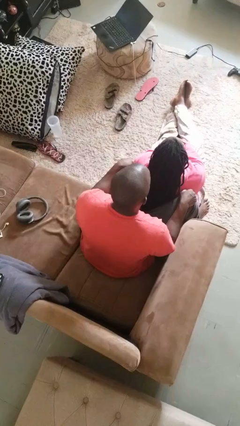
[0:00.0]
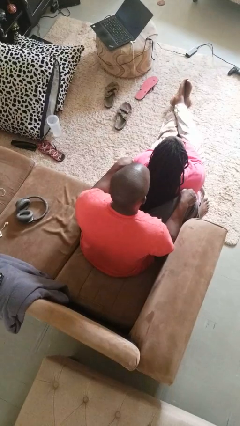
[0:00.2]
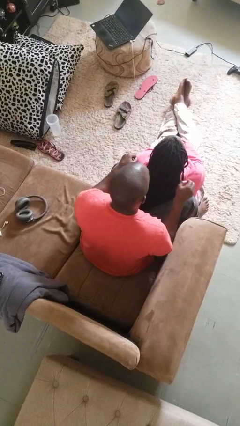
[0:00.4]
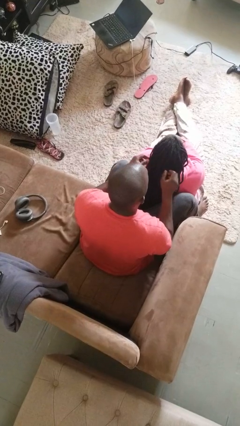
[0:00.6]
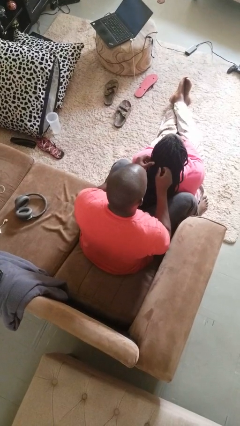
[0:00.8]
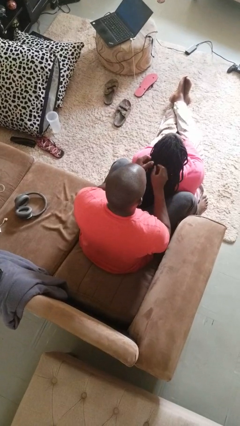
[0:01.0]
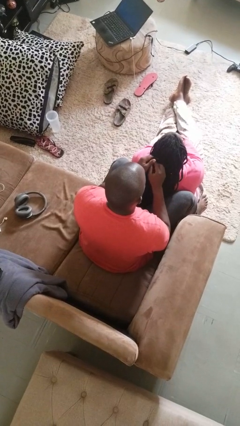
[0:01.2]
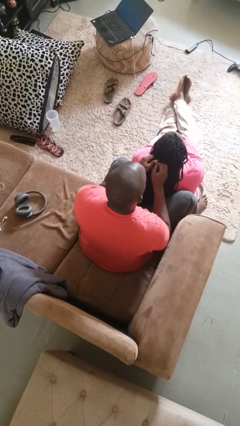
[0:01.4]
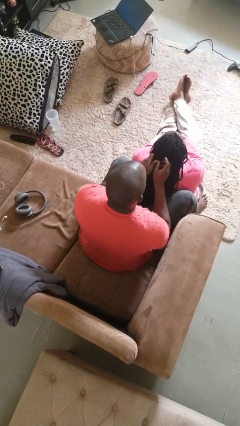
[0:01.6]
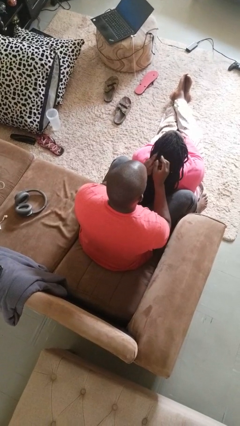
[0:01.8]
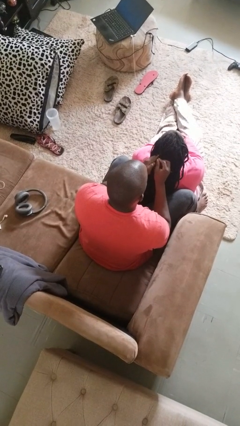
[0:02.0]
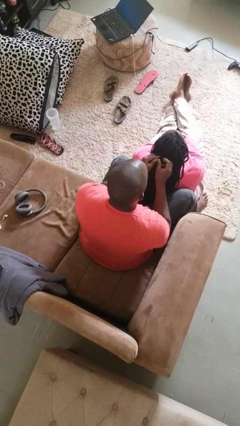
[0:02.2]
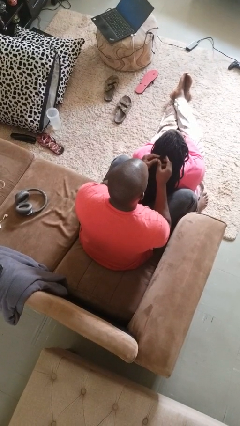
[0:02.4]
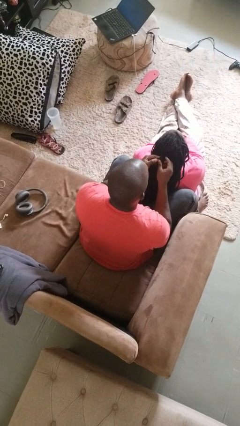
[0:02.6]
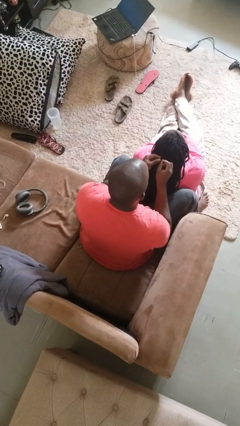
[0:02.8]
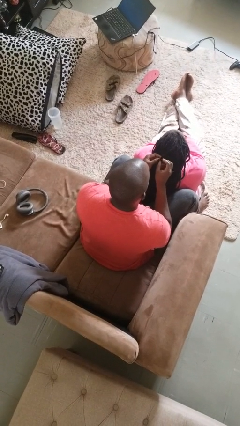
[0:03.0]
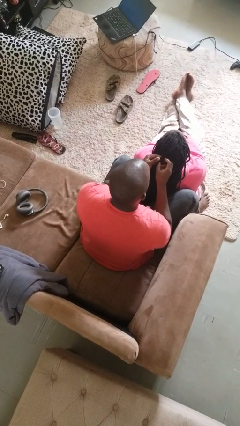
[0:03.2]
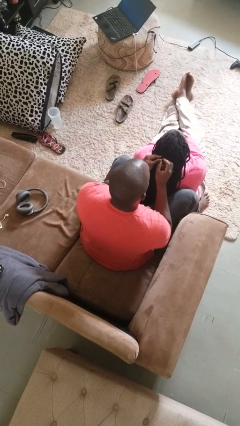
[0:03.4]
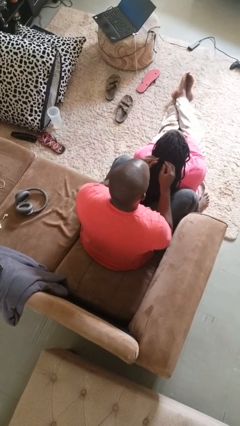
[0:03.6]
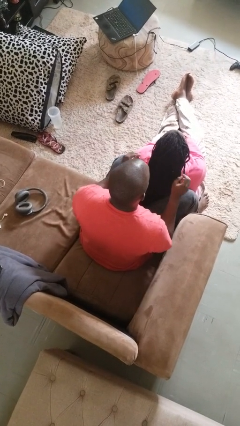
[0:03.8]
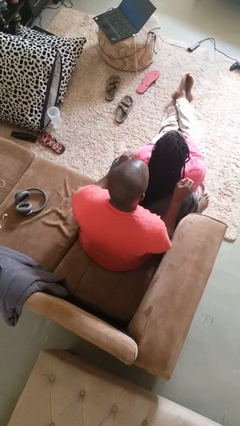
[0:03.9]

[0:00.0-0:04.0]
person braids hair of person

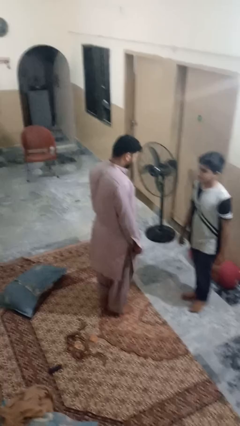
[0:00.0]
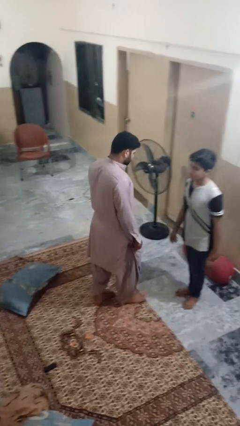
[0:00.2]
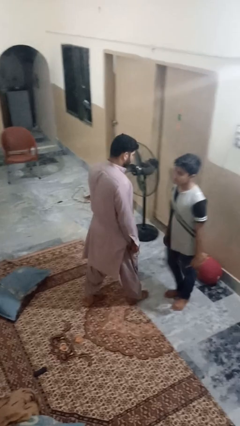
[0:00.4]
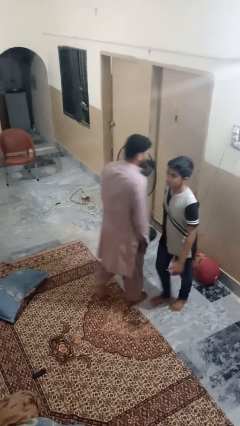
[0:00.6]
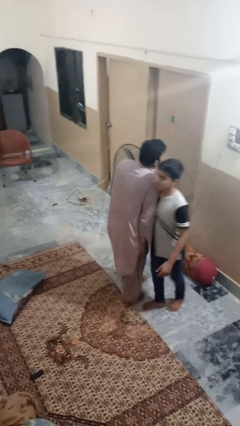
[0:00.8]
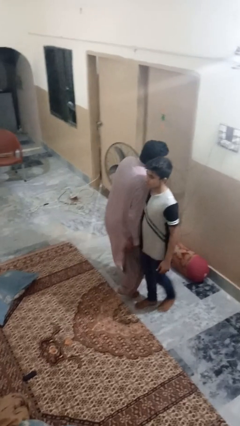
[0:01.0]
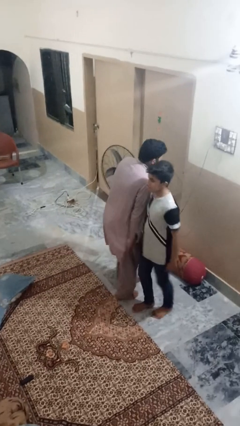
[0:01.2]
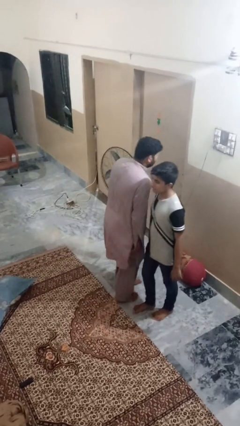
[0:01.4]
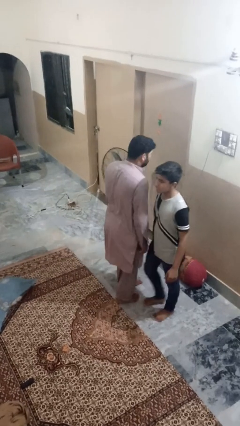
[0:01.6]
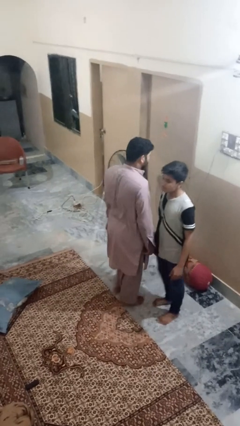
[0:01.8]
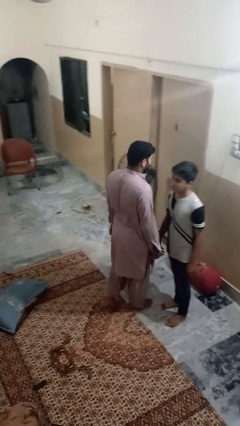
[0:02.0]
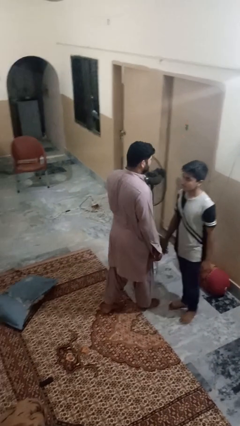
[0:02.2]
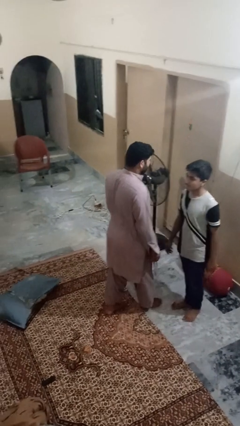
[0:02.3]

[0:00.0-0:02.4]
person bumps into person

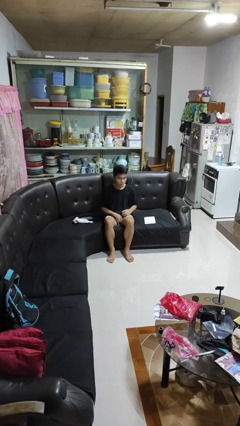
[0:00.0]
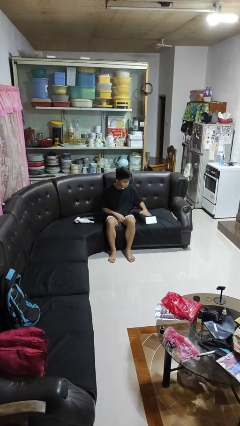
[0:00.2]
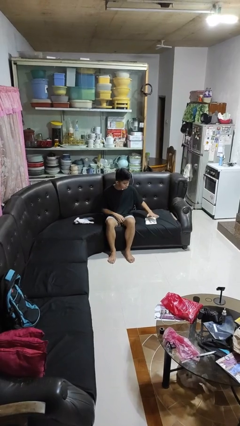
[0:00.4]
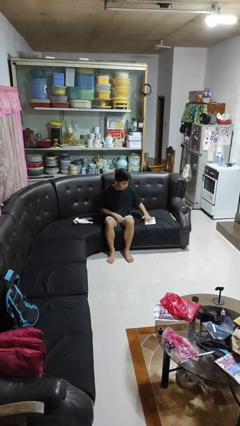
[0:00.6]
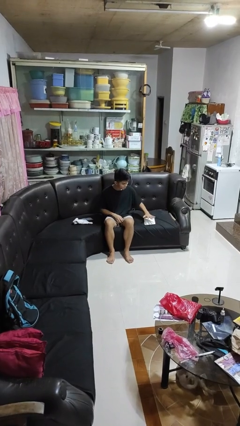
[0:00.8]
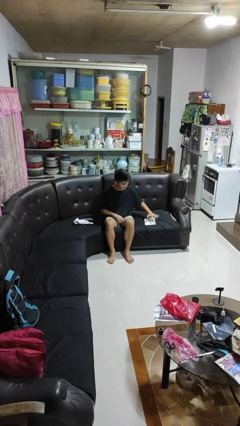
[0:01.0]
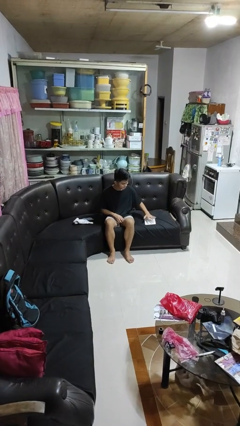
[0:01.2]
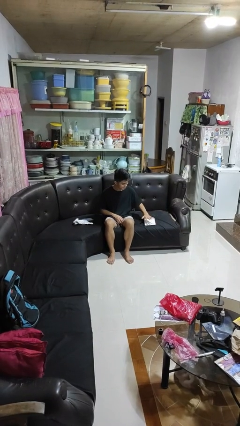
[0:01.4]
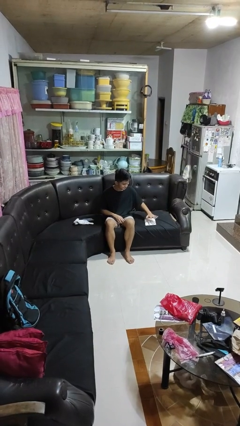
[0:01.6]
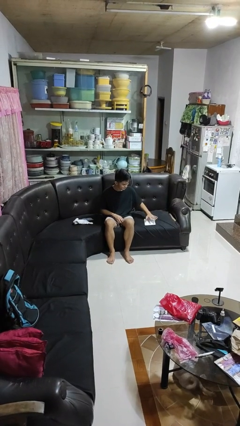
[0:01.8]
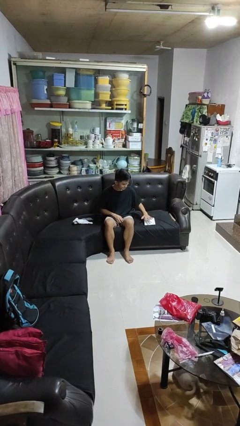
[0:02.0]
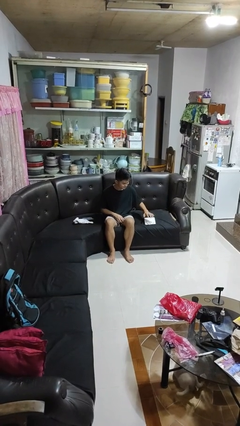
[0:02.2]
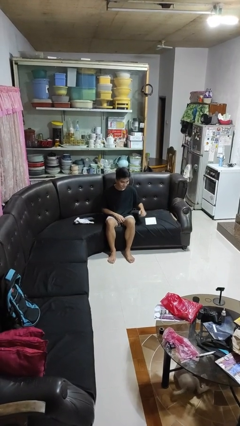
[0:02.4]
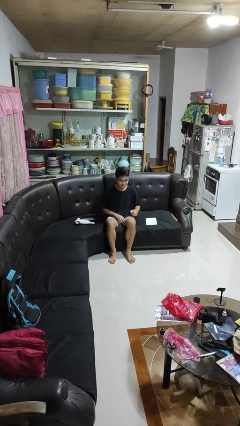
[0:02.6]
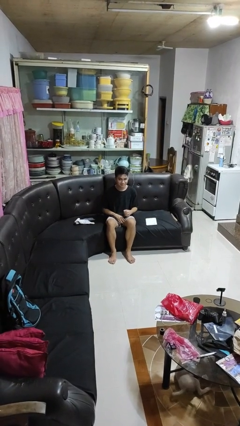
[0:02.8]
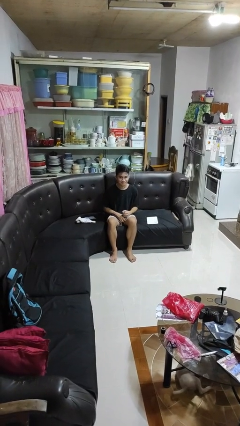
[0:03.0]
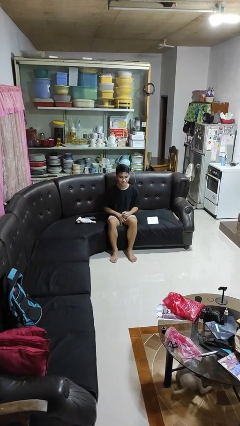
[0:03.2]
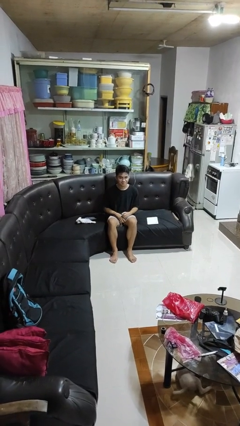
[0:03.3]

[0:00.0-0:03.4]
person waves hand over object

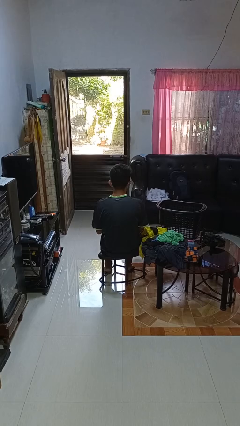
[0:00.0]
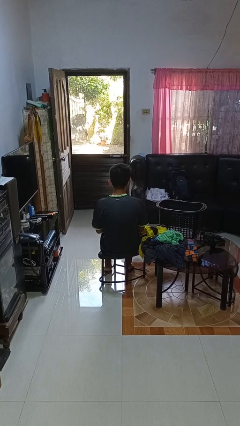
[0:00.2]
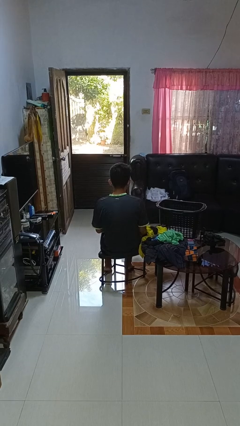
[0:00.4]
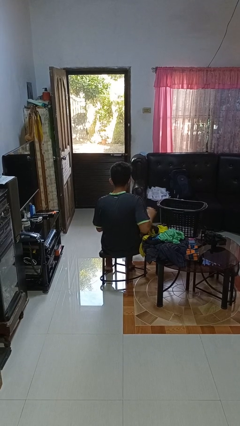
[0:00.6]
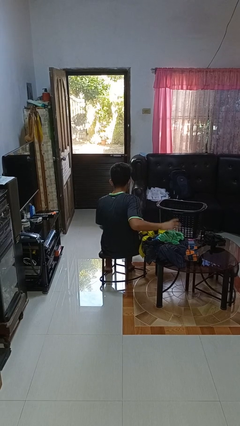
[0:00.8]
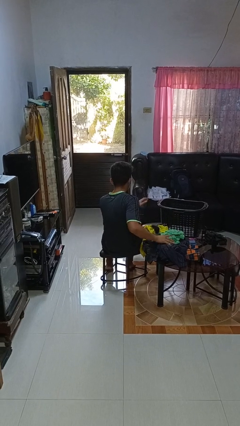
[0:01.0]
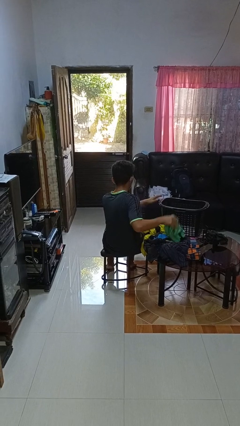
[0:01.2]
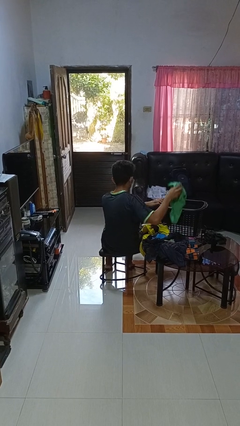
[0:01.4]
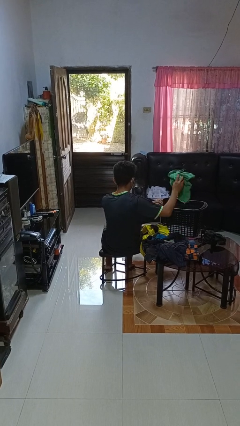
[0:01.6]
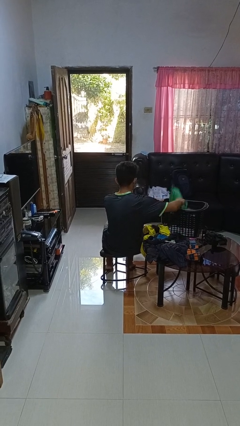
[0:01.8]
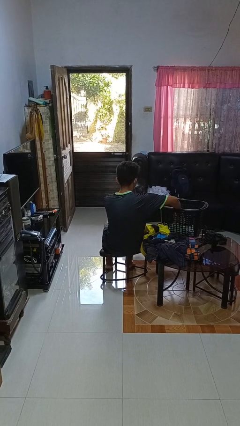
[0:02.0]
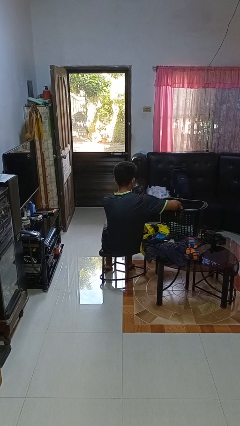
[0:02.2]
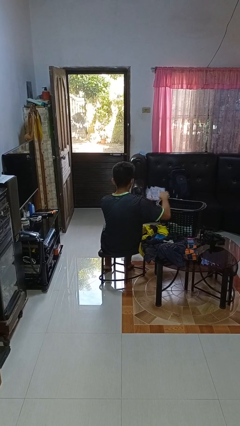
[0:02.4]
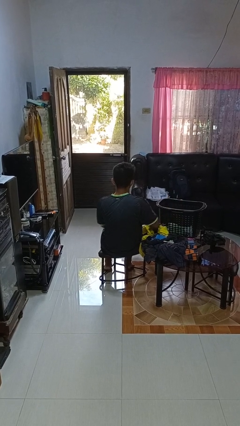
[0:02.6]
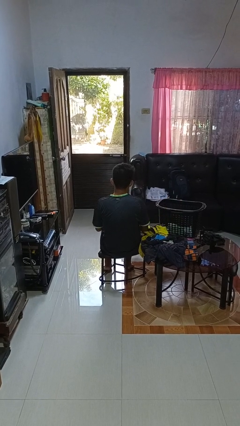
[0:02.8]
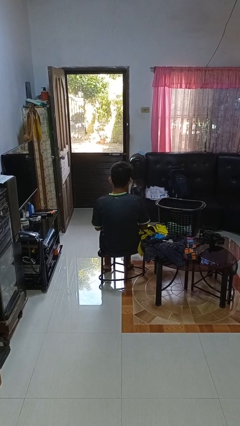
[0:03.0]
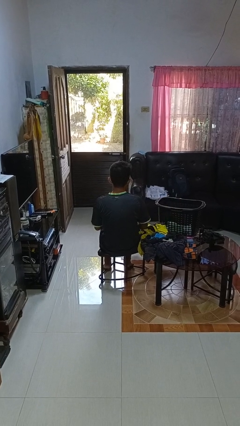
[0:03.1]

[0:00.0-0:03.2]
person puts object into basket

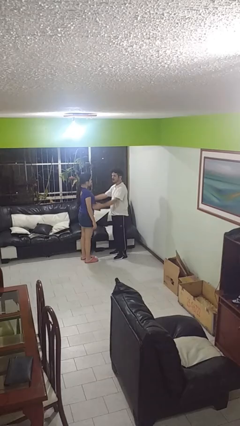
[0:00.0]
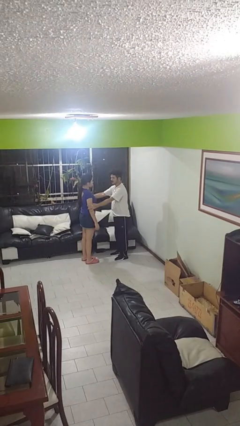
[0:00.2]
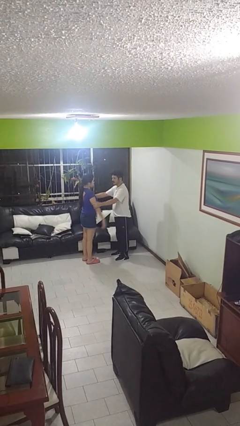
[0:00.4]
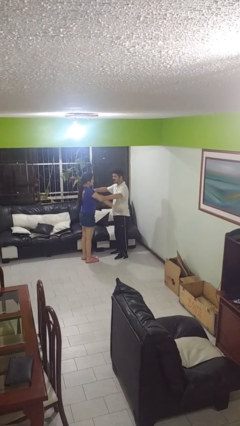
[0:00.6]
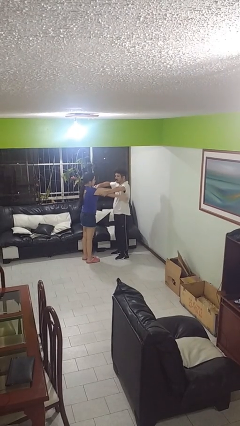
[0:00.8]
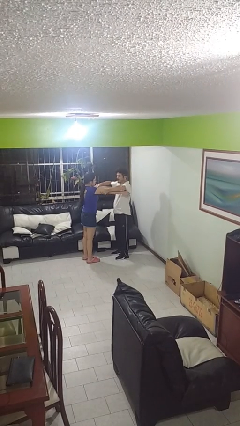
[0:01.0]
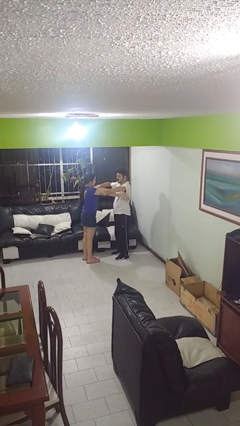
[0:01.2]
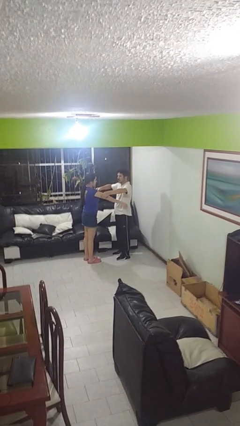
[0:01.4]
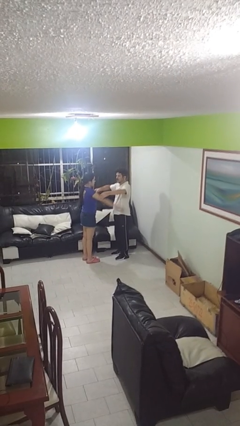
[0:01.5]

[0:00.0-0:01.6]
person grabs person by bicep

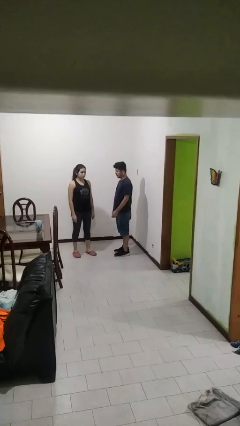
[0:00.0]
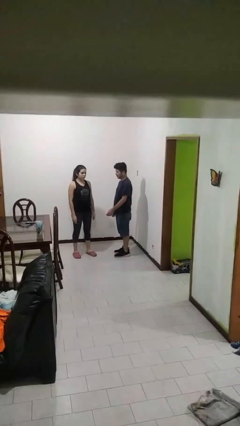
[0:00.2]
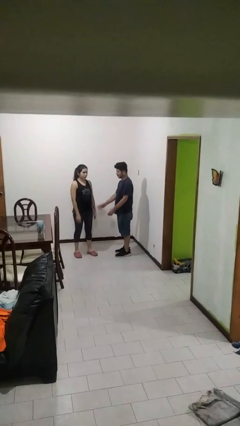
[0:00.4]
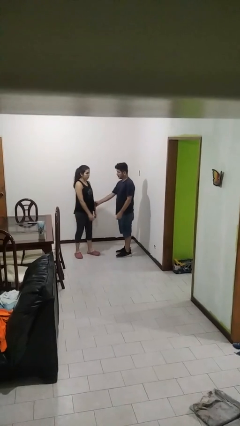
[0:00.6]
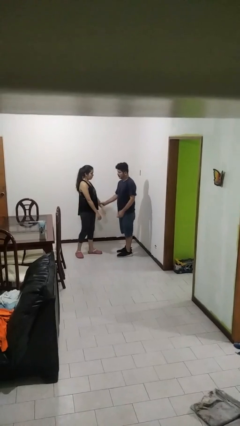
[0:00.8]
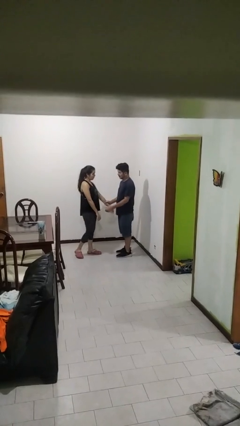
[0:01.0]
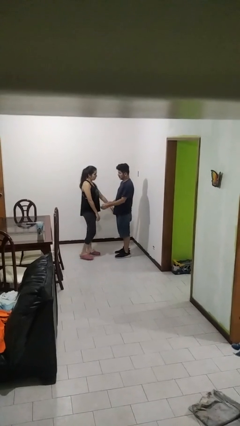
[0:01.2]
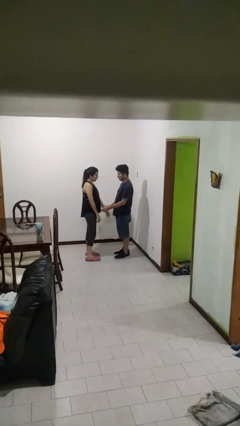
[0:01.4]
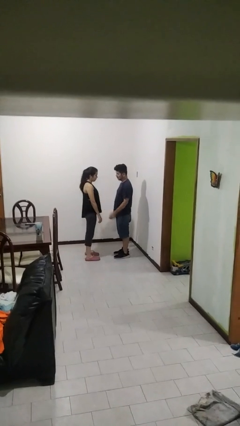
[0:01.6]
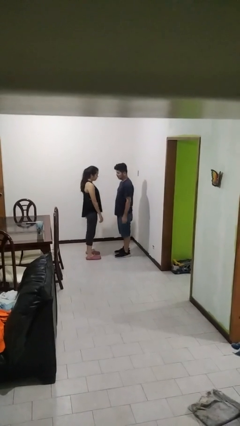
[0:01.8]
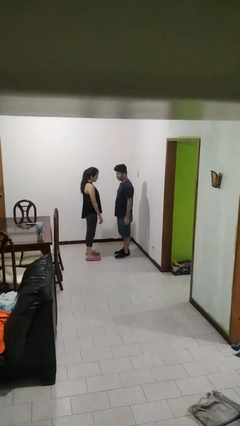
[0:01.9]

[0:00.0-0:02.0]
person grabs person by forearm

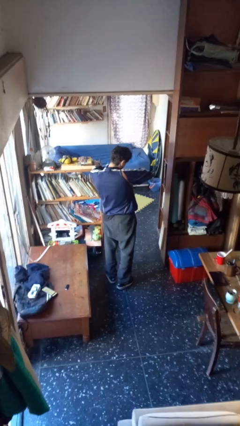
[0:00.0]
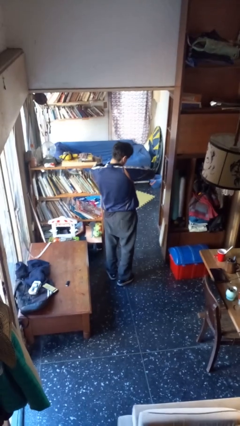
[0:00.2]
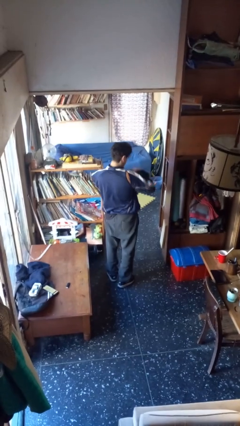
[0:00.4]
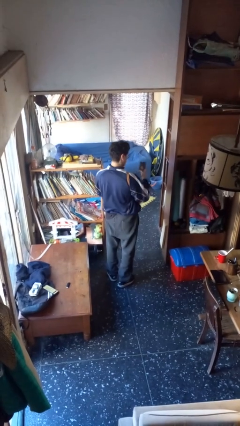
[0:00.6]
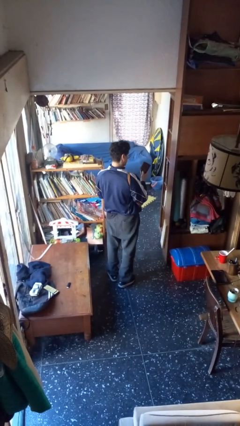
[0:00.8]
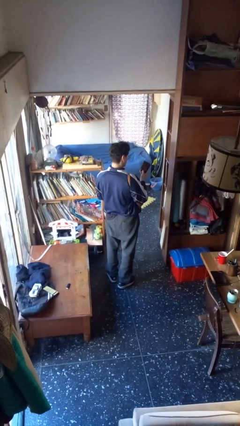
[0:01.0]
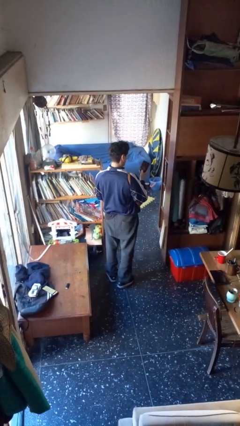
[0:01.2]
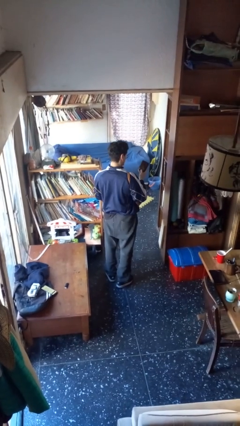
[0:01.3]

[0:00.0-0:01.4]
person takes object from purse
